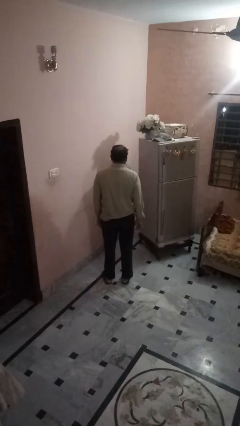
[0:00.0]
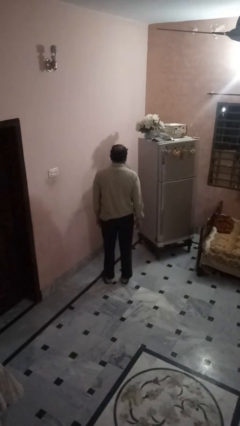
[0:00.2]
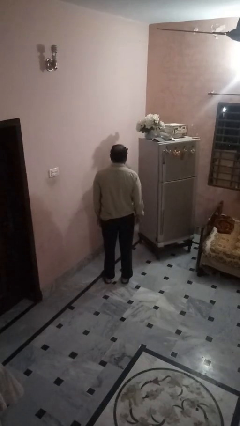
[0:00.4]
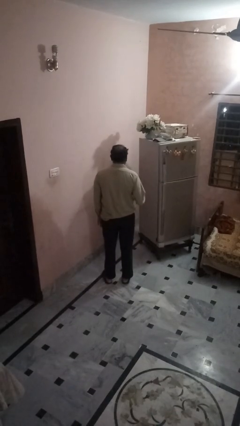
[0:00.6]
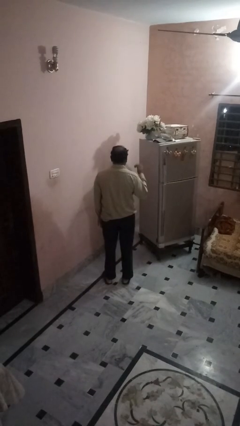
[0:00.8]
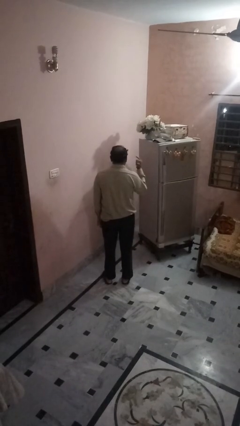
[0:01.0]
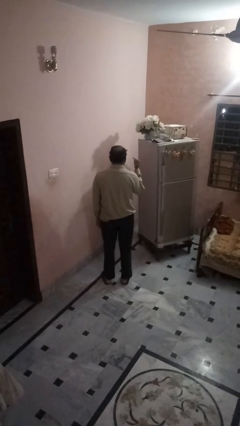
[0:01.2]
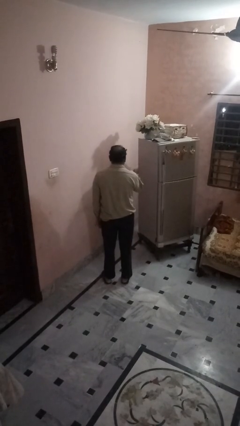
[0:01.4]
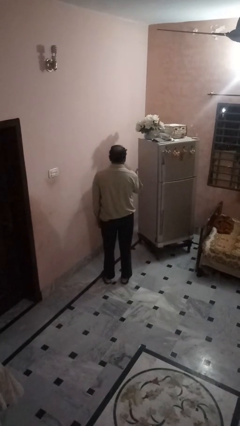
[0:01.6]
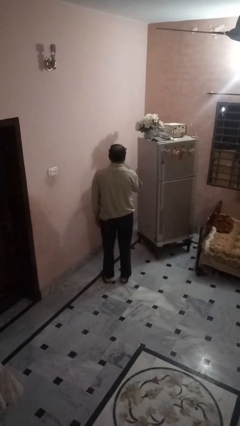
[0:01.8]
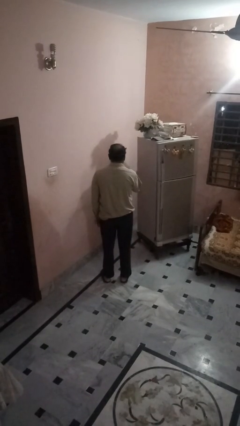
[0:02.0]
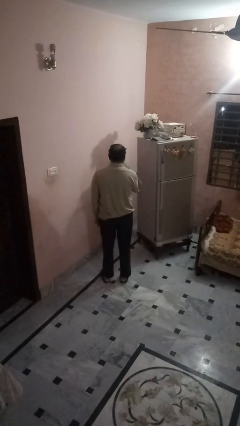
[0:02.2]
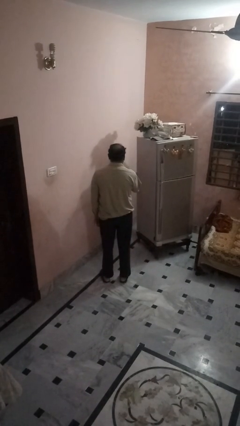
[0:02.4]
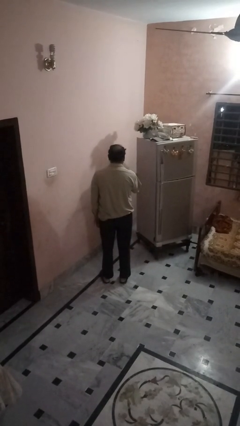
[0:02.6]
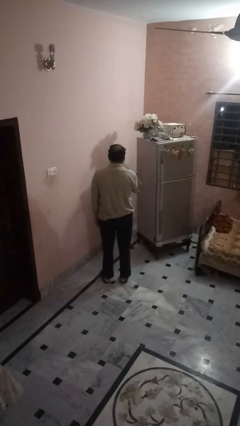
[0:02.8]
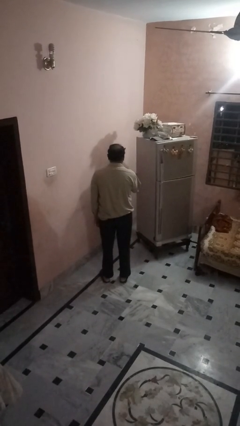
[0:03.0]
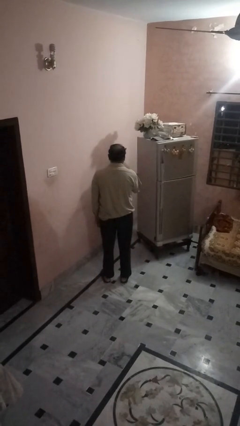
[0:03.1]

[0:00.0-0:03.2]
person gestures hang loose

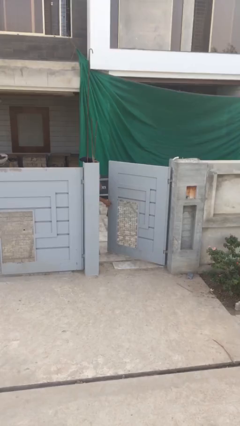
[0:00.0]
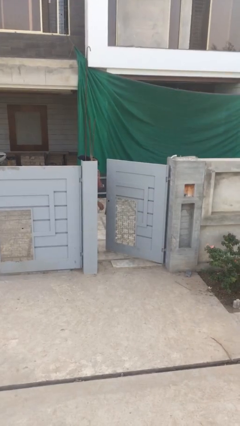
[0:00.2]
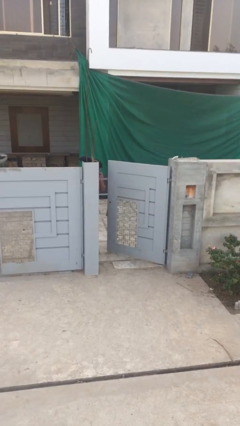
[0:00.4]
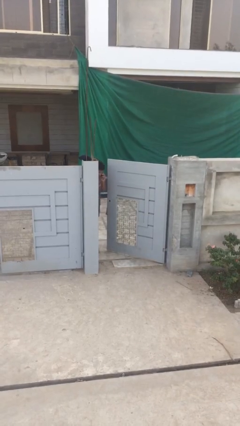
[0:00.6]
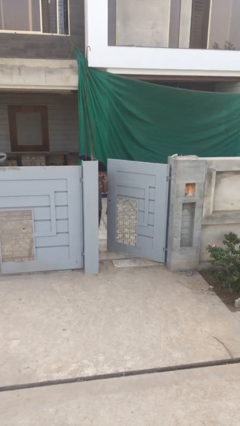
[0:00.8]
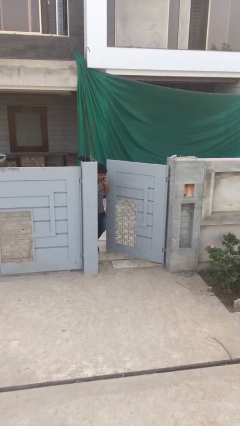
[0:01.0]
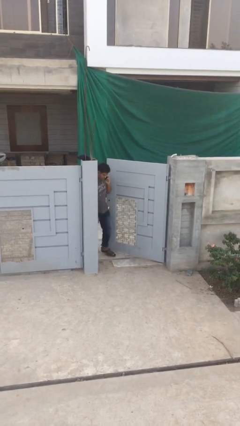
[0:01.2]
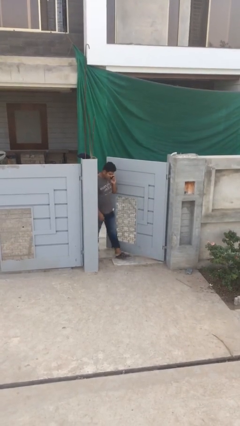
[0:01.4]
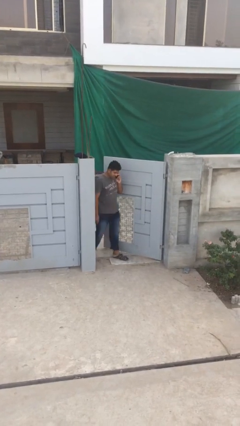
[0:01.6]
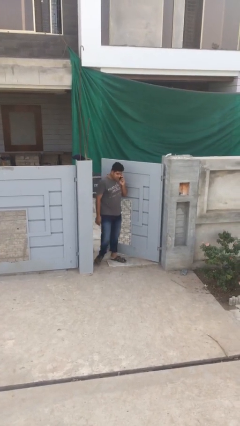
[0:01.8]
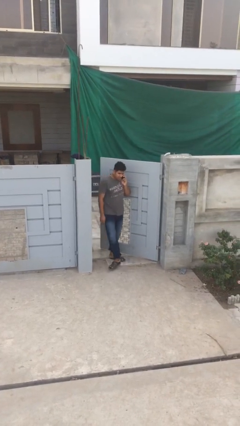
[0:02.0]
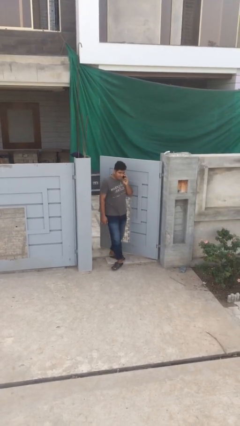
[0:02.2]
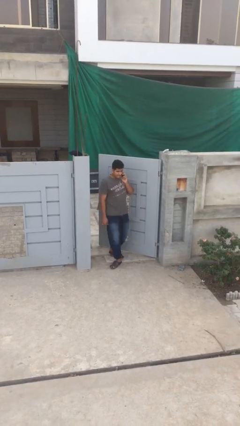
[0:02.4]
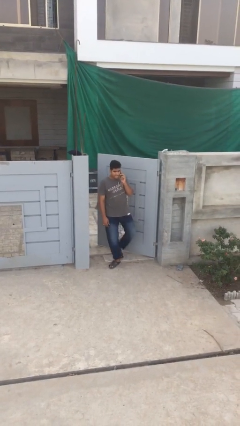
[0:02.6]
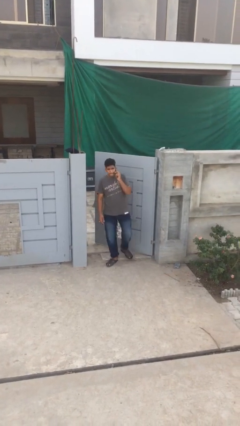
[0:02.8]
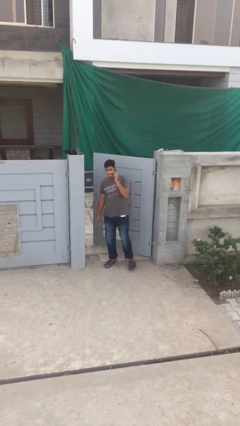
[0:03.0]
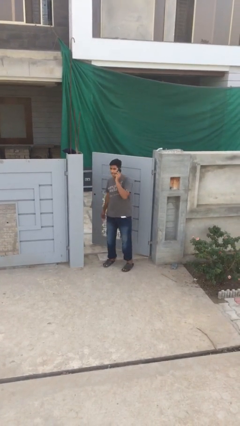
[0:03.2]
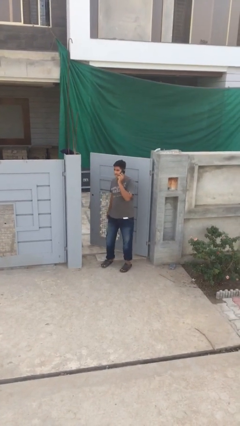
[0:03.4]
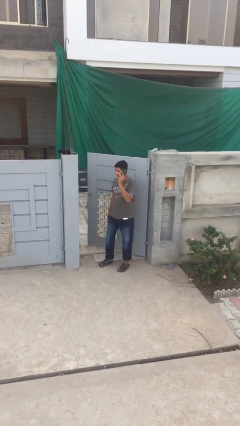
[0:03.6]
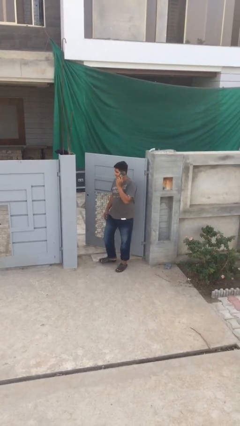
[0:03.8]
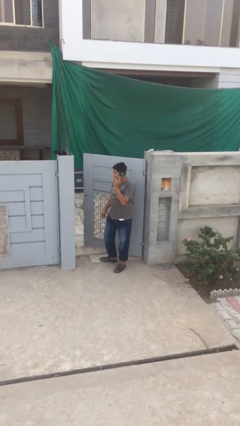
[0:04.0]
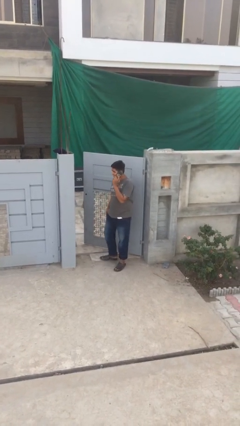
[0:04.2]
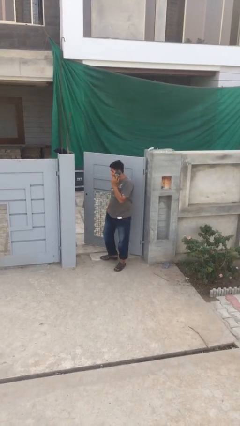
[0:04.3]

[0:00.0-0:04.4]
person enters scene through structure

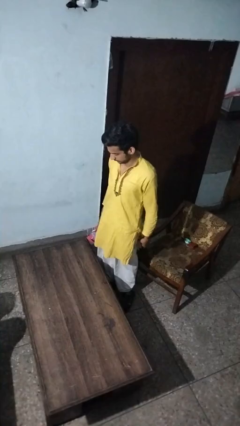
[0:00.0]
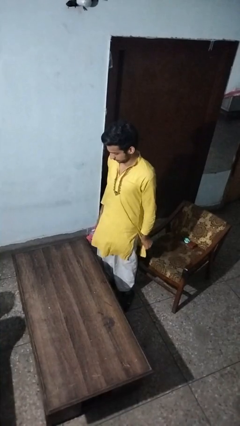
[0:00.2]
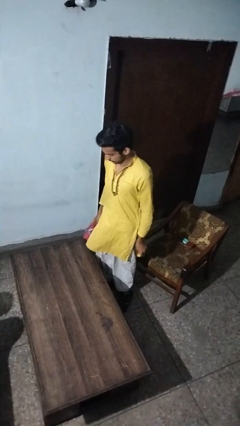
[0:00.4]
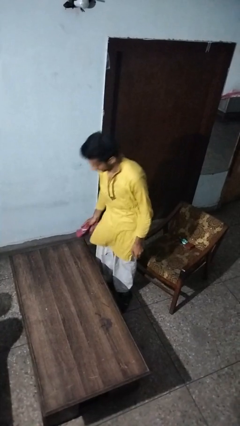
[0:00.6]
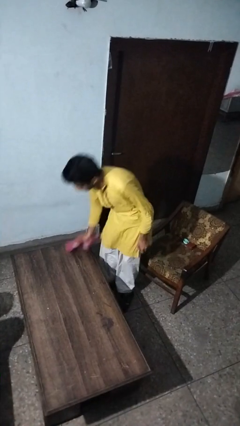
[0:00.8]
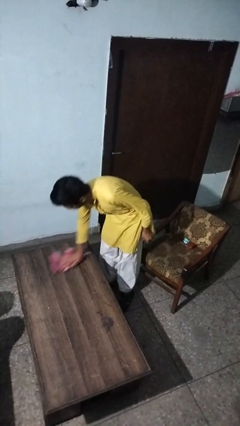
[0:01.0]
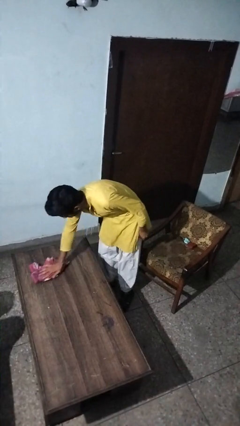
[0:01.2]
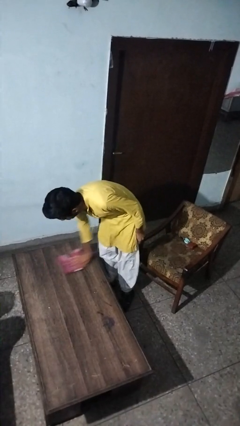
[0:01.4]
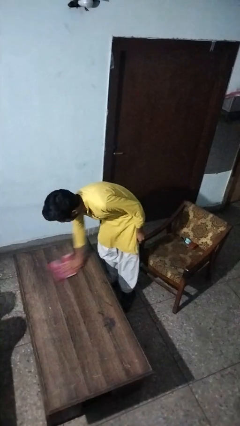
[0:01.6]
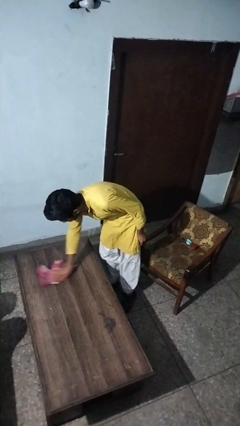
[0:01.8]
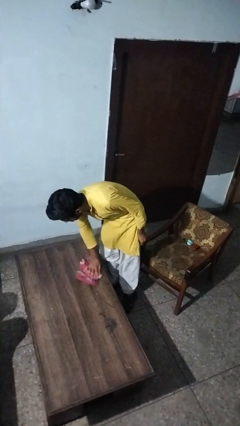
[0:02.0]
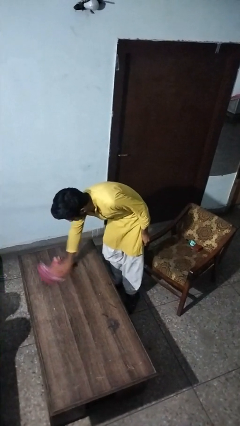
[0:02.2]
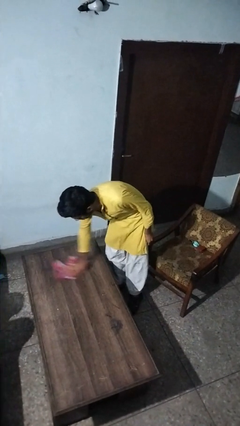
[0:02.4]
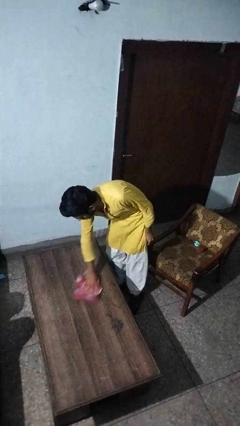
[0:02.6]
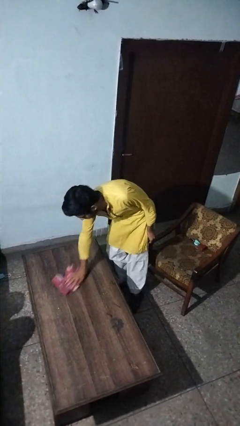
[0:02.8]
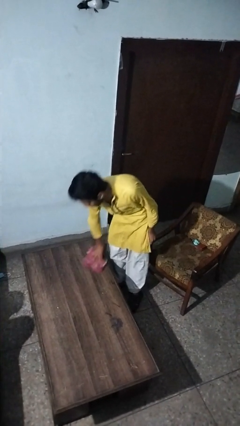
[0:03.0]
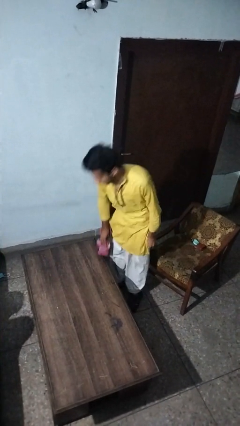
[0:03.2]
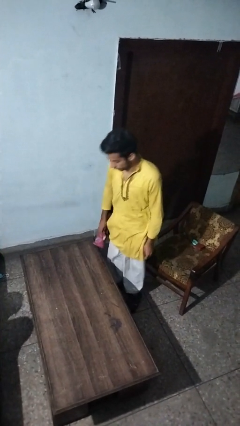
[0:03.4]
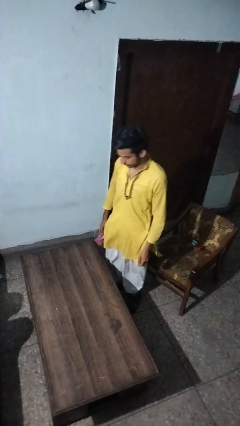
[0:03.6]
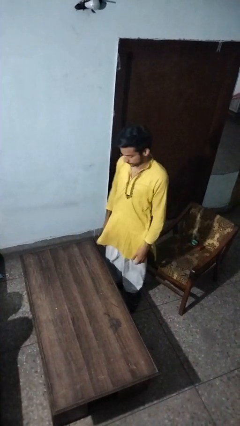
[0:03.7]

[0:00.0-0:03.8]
person cleans table with rag

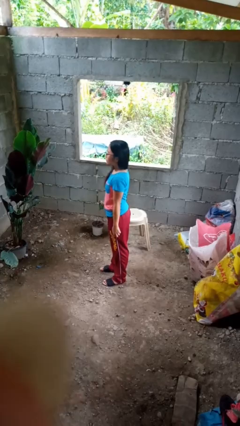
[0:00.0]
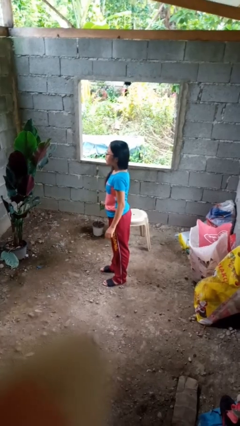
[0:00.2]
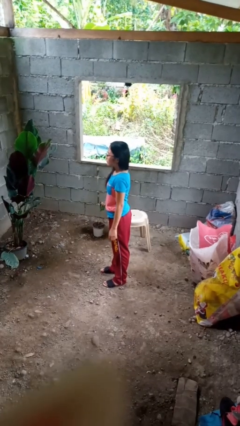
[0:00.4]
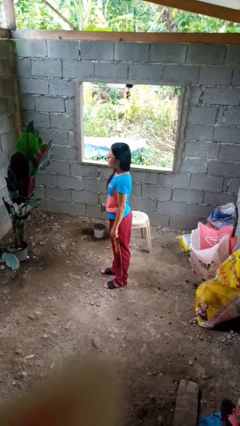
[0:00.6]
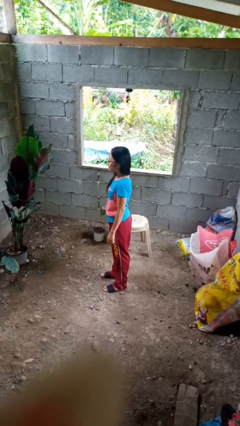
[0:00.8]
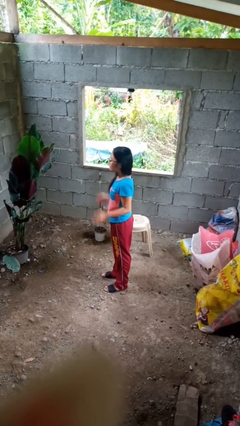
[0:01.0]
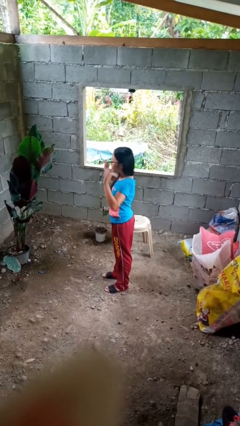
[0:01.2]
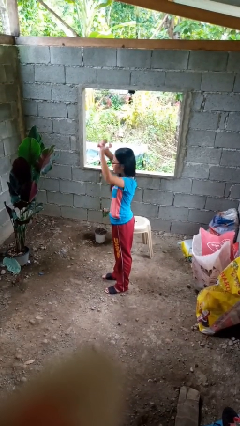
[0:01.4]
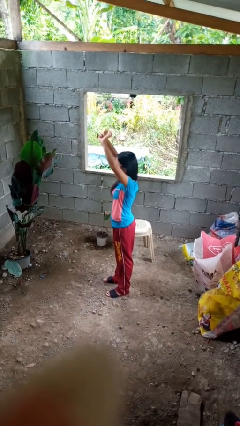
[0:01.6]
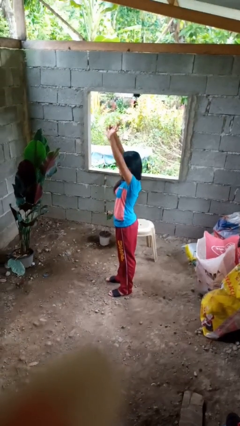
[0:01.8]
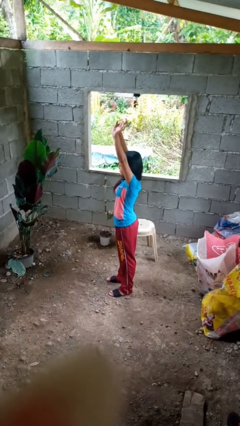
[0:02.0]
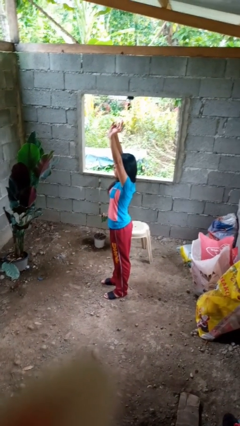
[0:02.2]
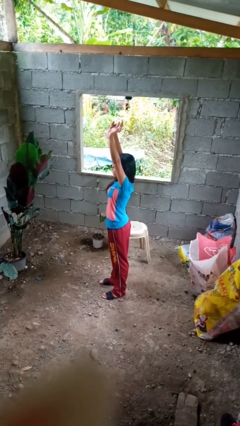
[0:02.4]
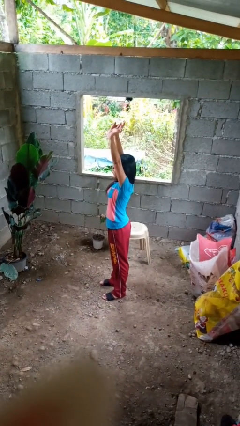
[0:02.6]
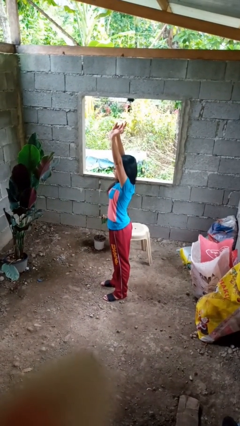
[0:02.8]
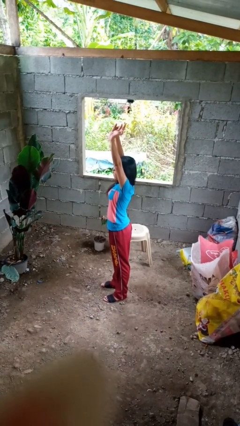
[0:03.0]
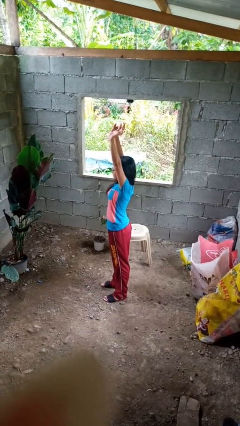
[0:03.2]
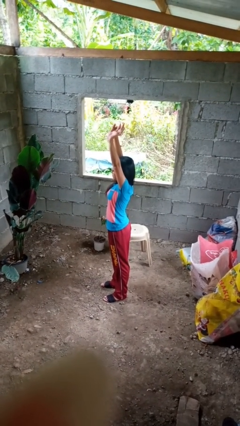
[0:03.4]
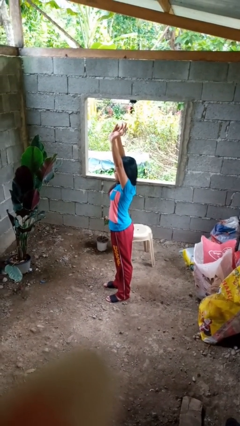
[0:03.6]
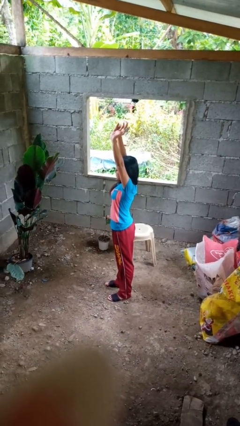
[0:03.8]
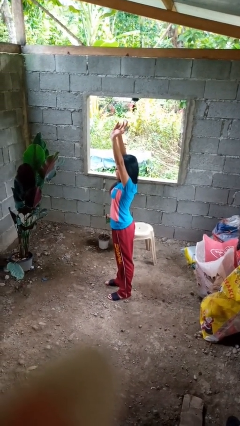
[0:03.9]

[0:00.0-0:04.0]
person stretches arms over head

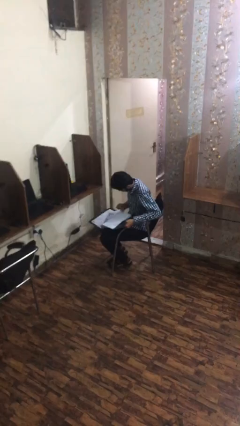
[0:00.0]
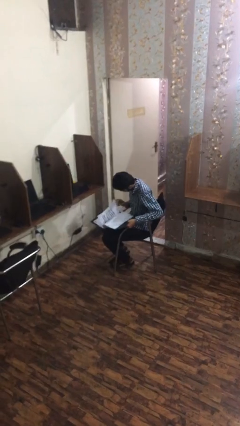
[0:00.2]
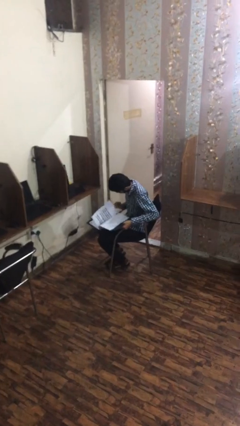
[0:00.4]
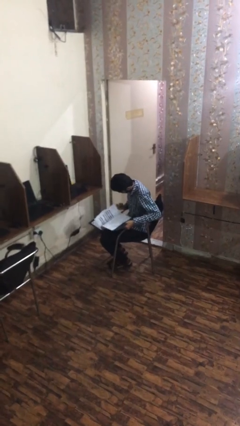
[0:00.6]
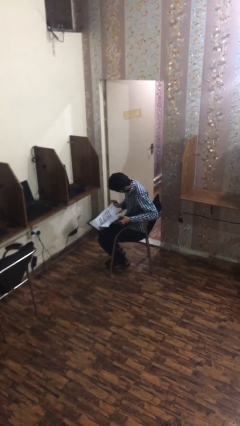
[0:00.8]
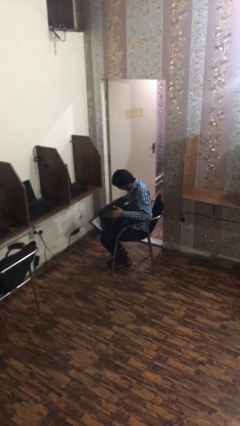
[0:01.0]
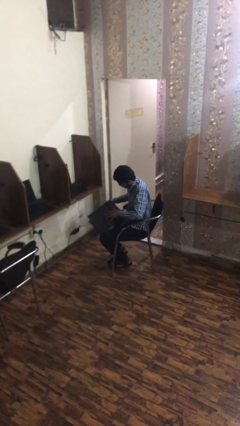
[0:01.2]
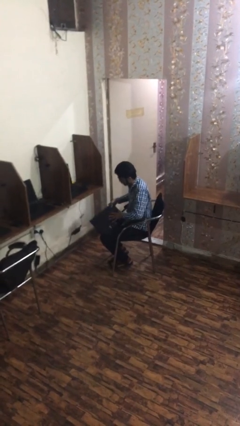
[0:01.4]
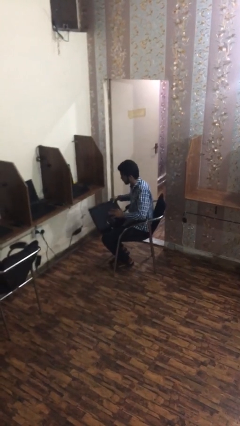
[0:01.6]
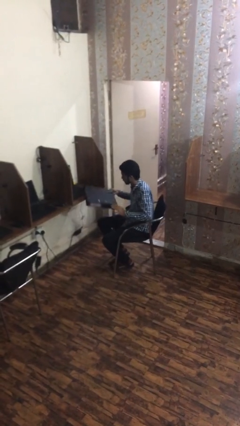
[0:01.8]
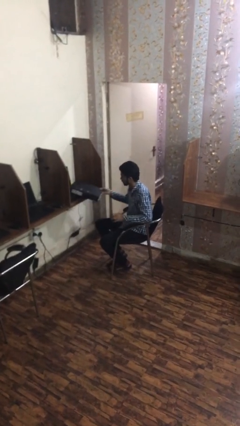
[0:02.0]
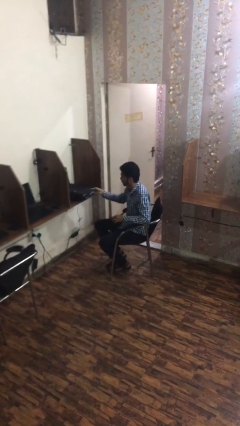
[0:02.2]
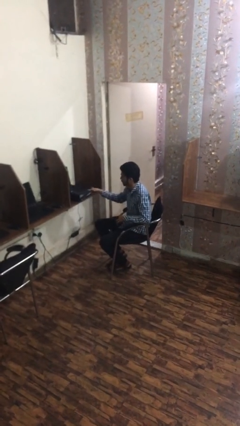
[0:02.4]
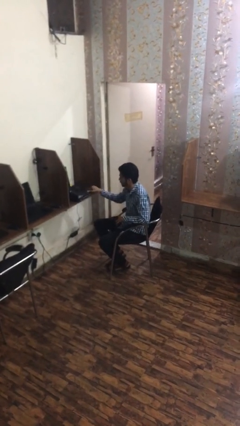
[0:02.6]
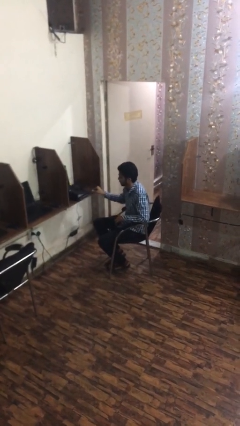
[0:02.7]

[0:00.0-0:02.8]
person puts down object on table
